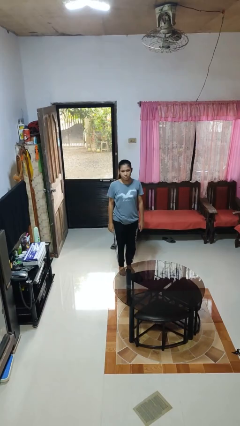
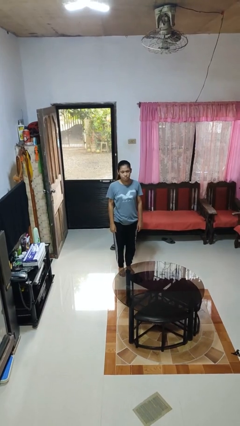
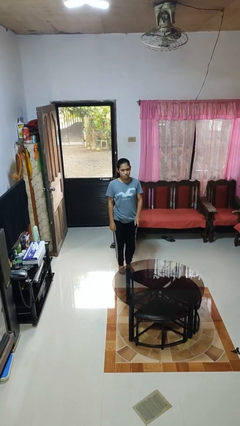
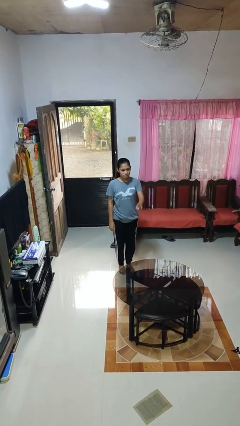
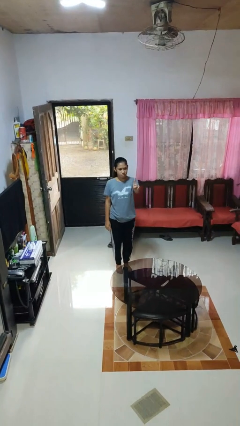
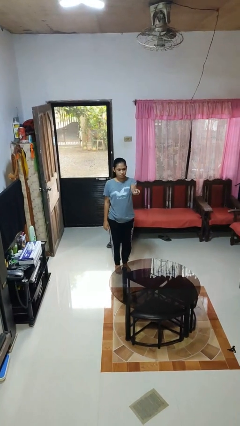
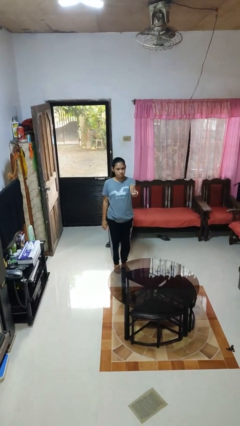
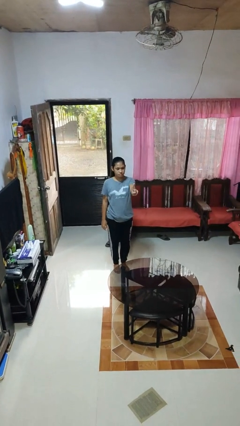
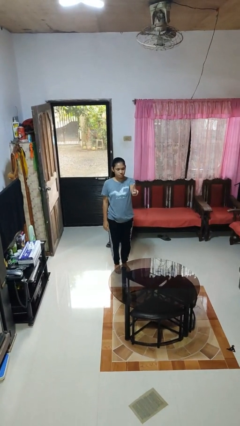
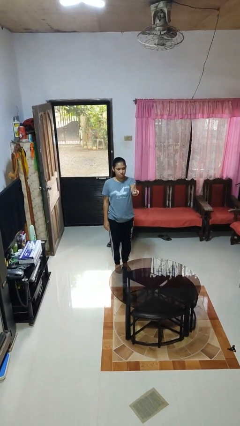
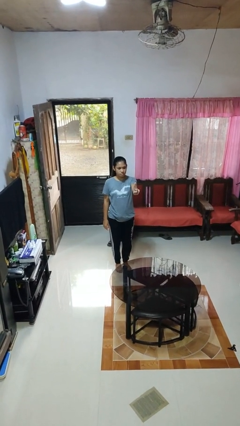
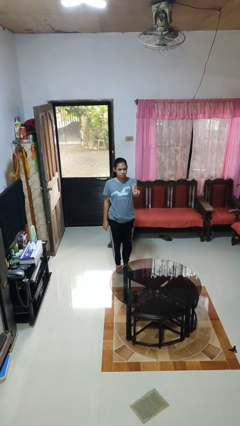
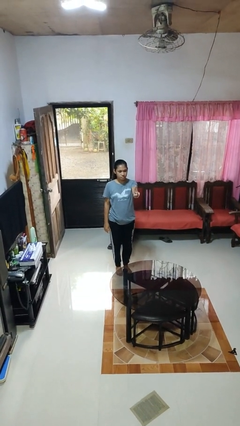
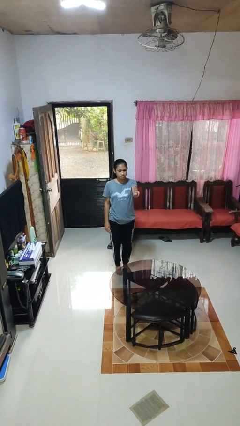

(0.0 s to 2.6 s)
person gestures number one

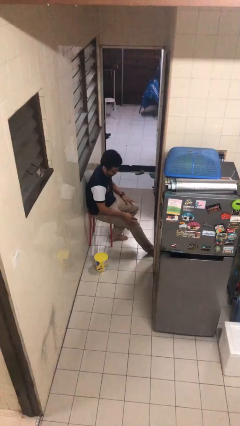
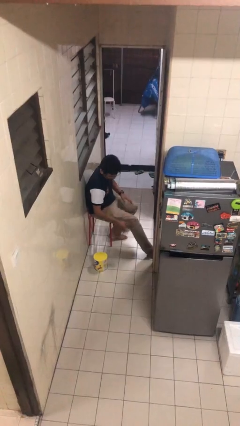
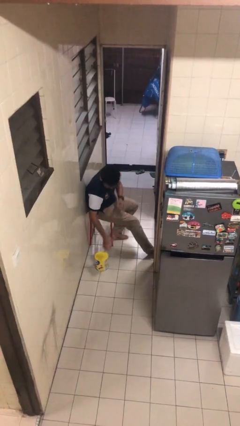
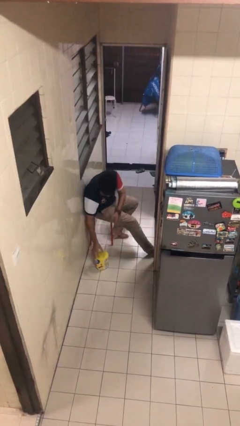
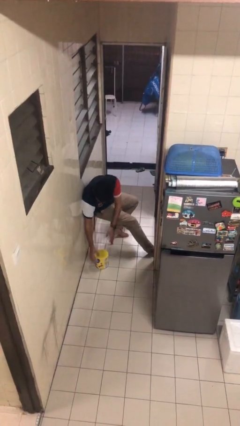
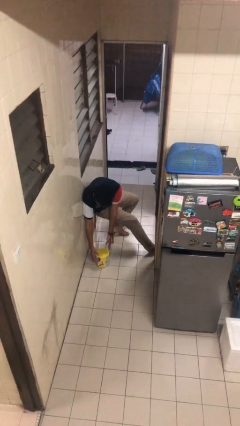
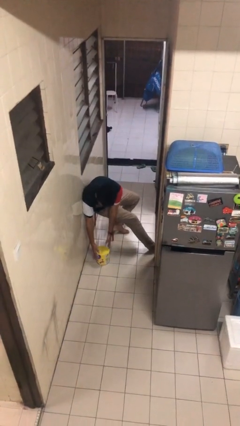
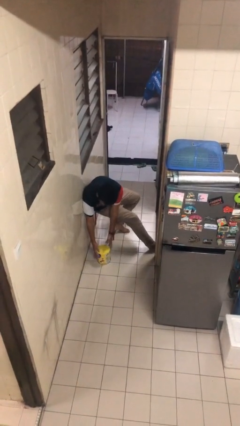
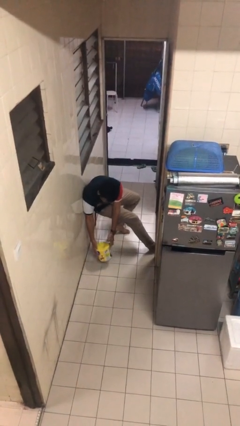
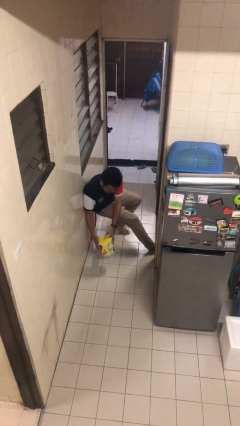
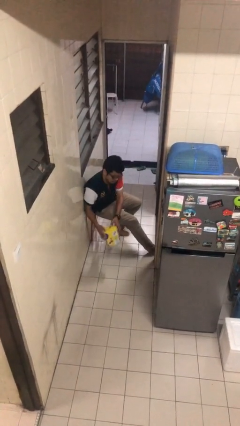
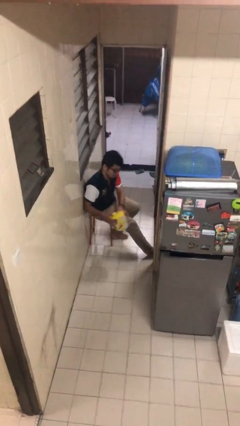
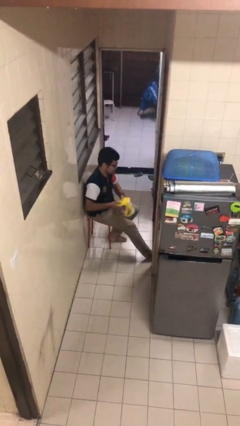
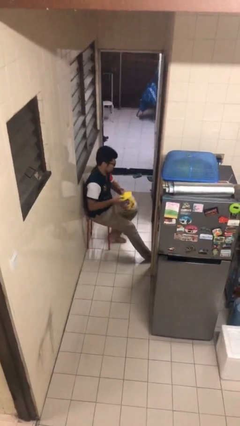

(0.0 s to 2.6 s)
person picks up object from floor

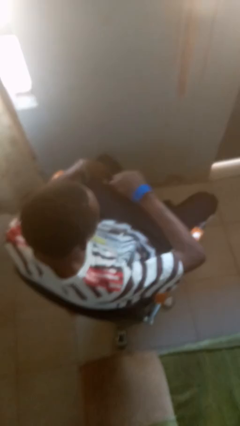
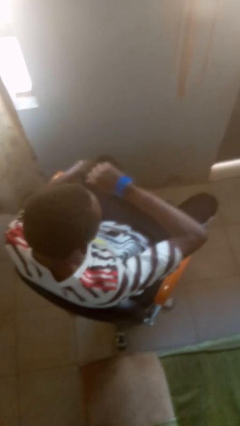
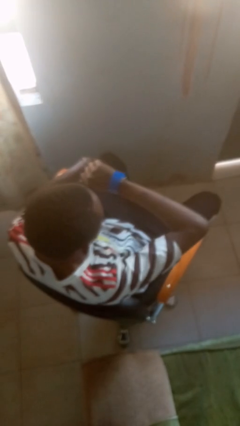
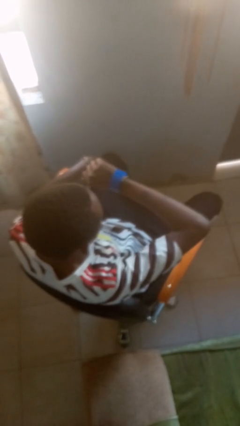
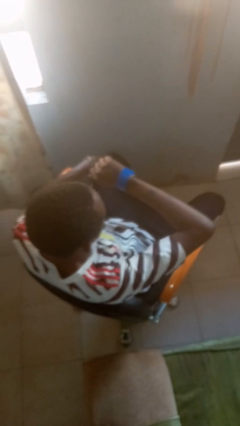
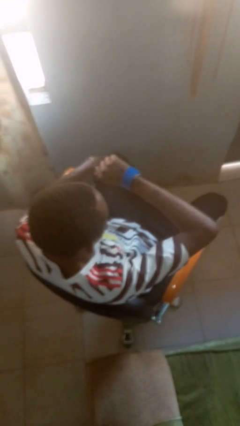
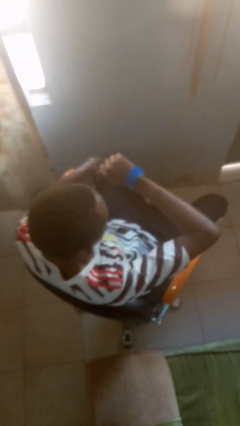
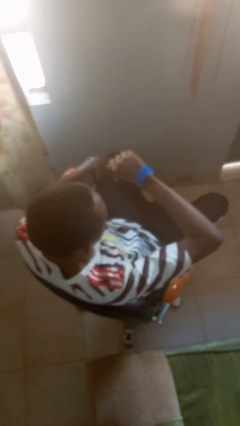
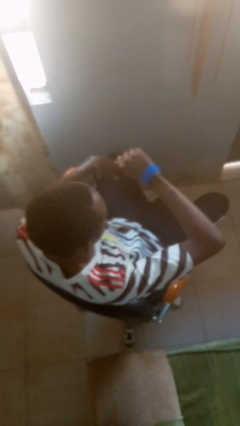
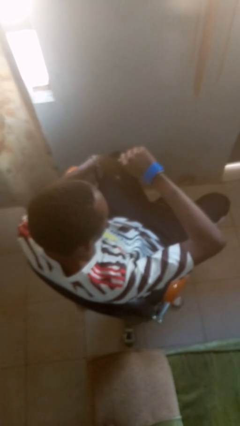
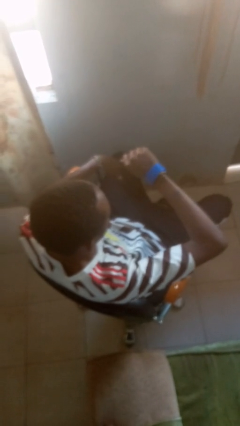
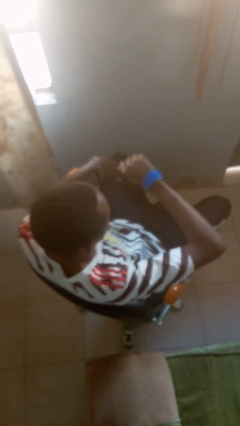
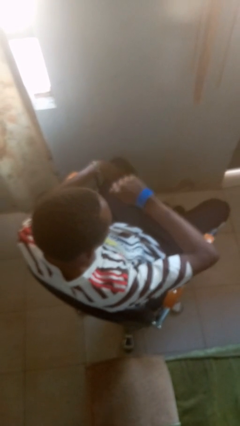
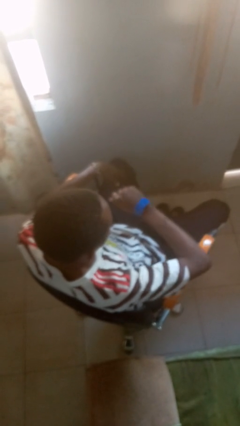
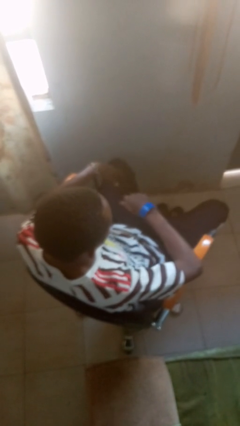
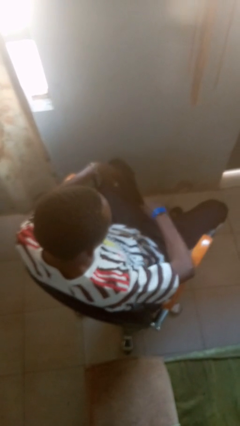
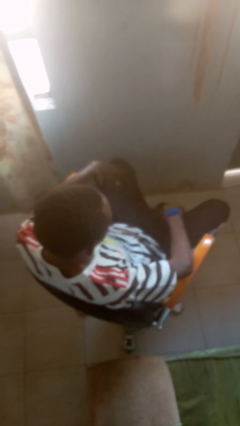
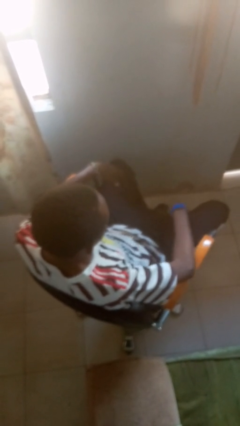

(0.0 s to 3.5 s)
person looks at wristwatch

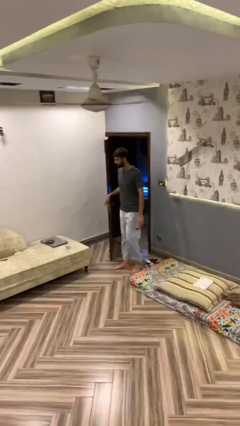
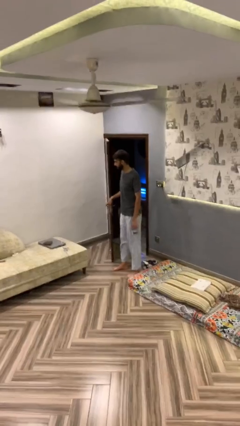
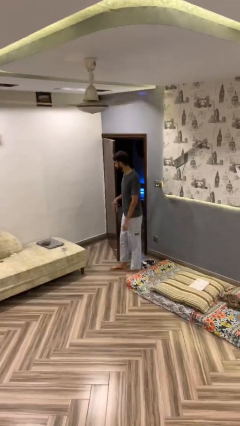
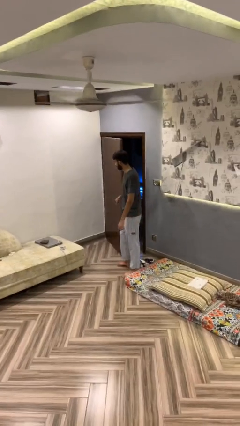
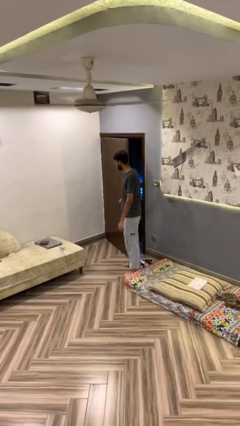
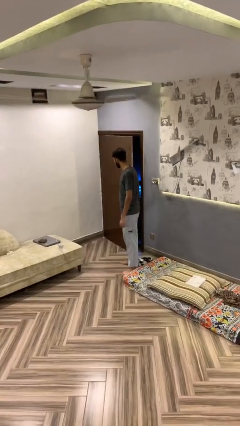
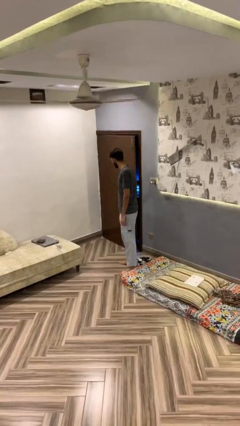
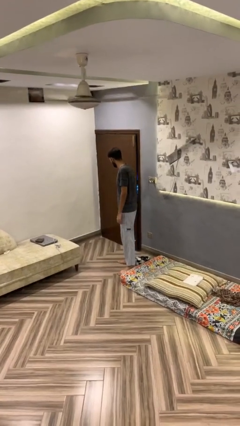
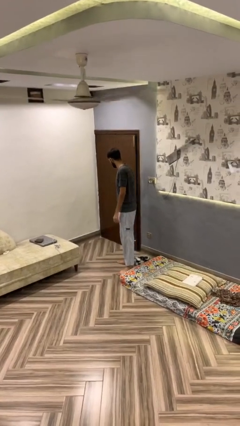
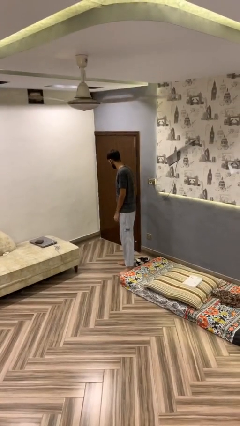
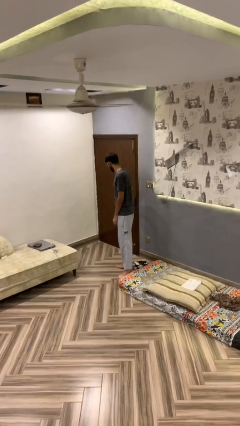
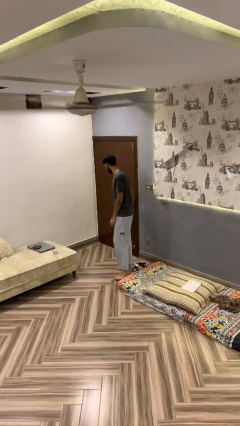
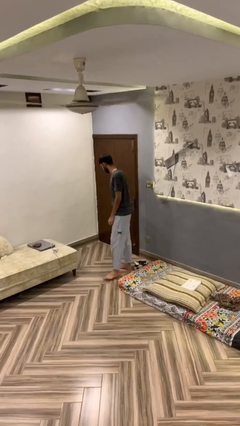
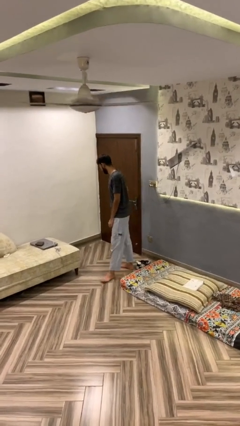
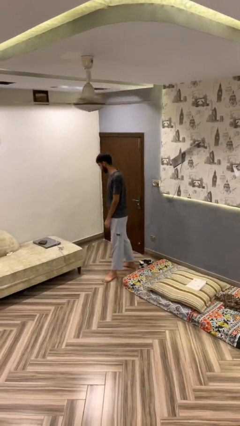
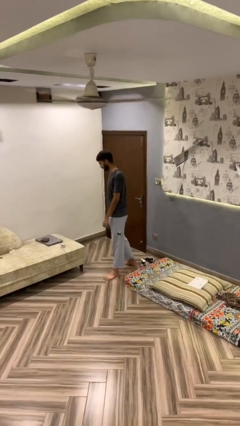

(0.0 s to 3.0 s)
person closes facility door

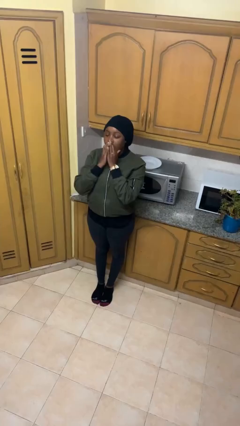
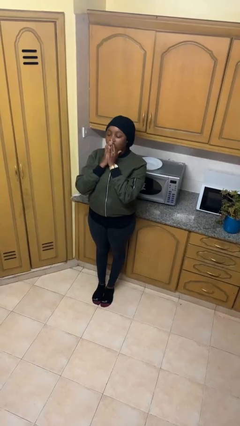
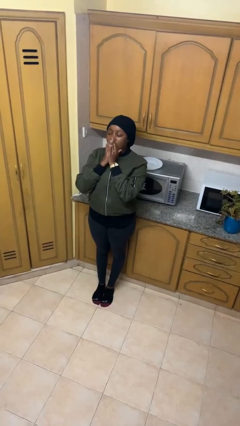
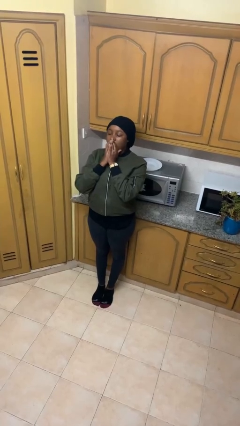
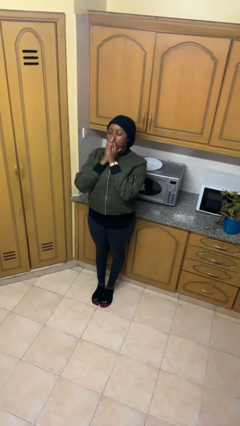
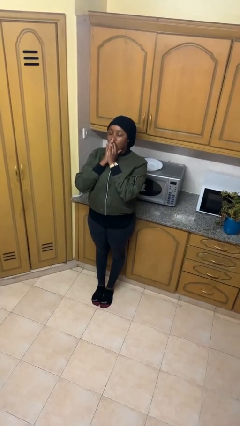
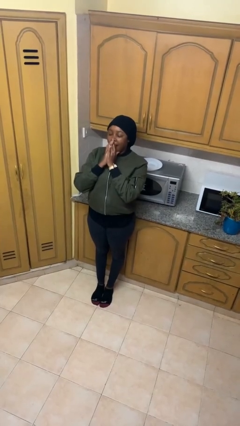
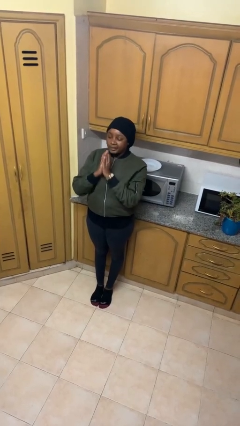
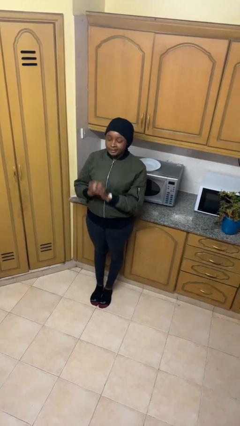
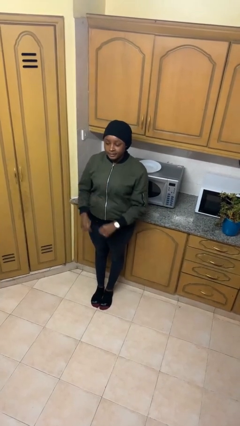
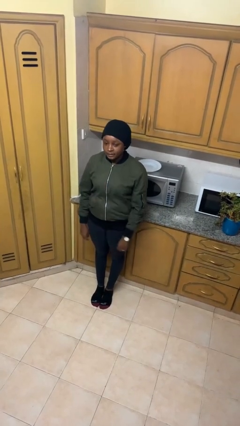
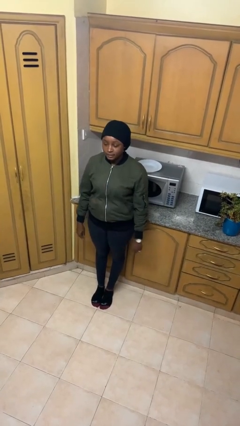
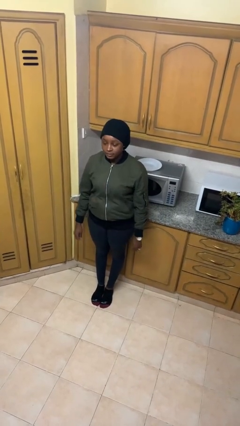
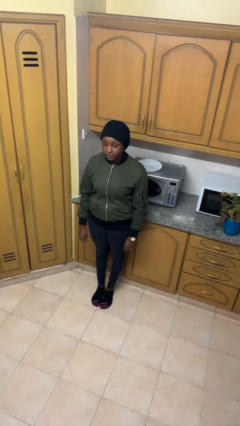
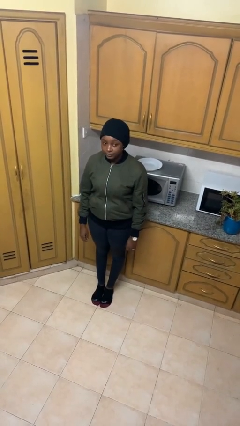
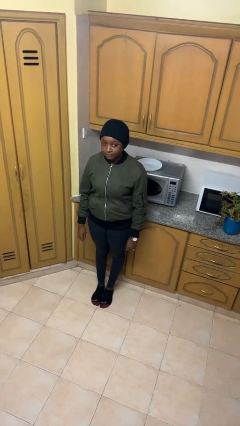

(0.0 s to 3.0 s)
person yawns

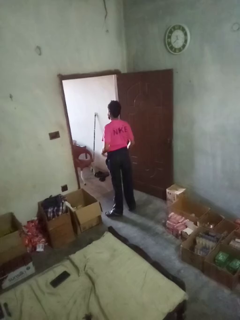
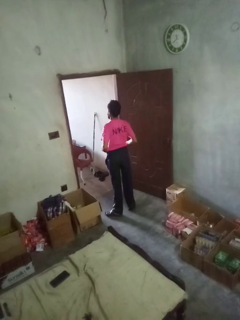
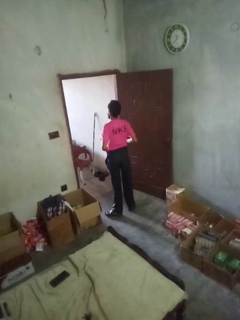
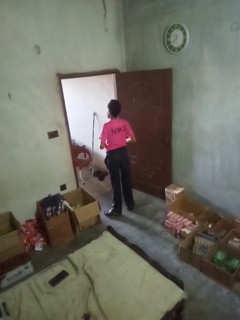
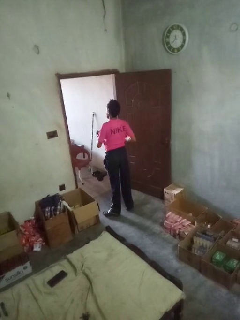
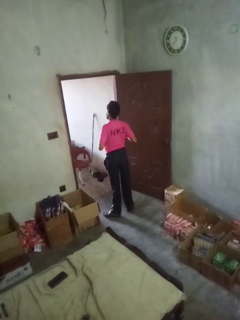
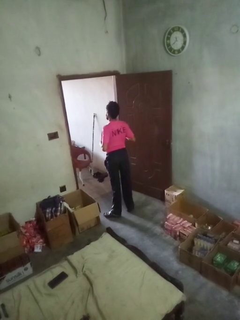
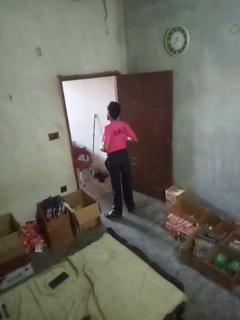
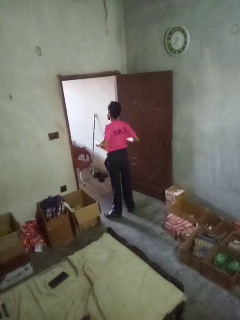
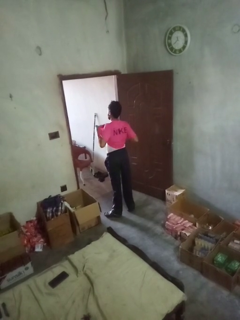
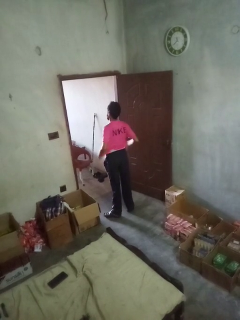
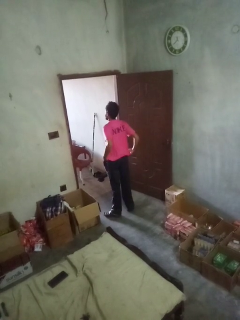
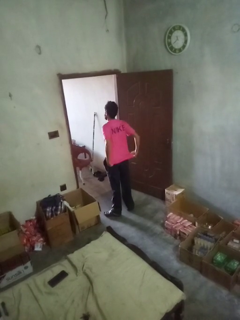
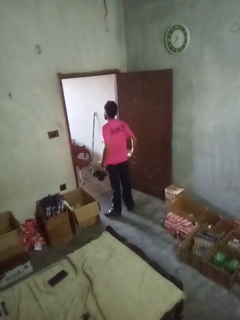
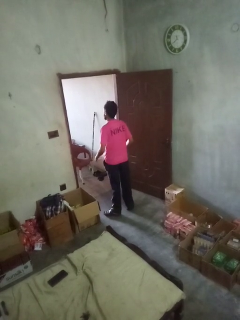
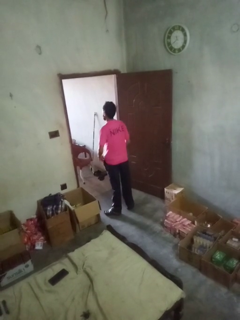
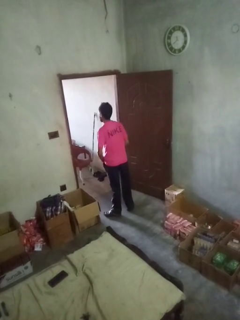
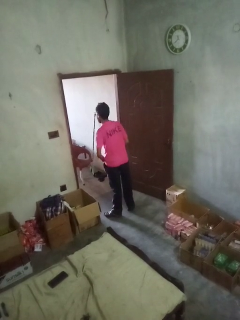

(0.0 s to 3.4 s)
person untucks shirt
